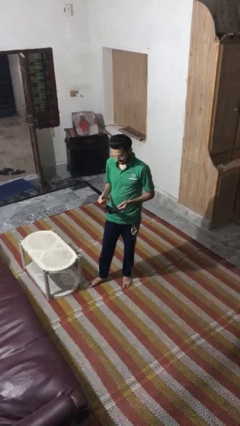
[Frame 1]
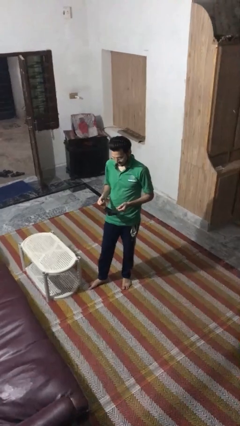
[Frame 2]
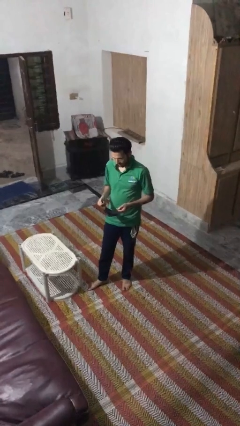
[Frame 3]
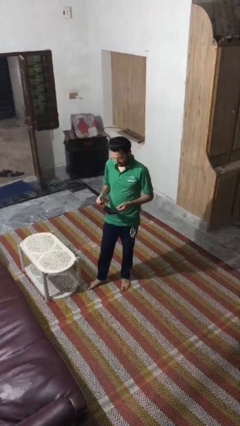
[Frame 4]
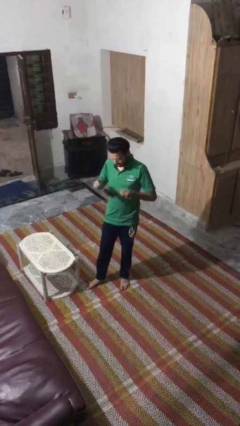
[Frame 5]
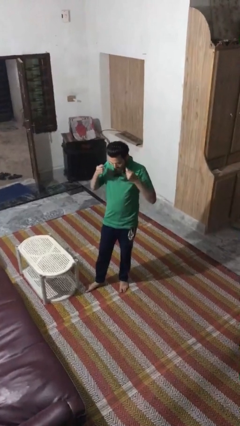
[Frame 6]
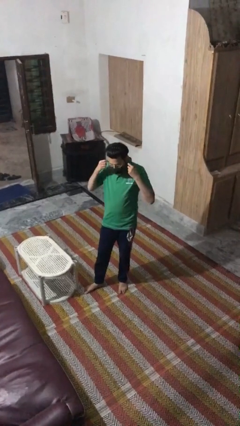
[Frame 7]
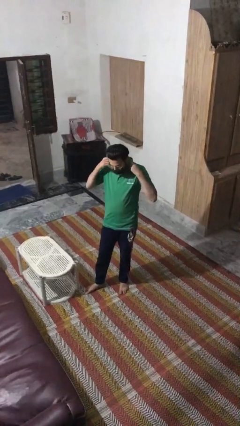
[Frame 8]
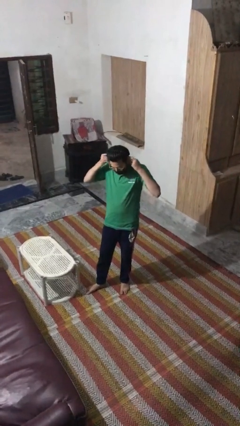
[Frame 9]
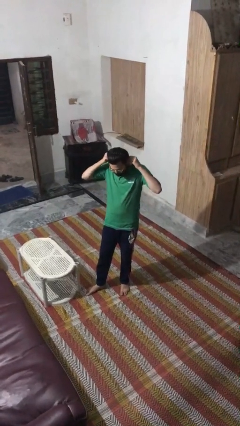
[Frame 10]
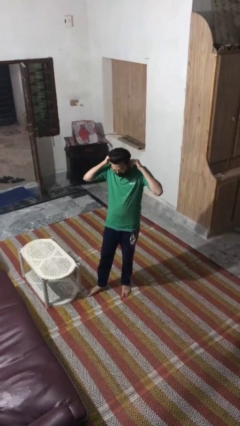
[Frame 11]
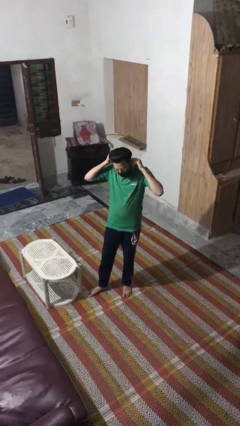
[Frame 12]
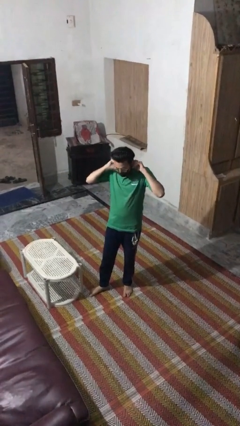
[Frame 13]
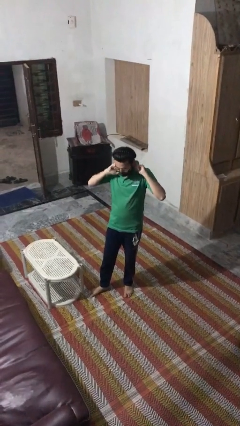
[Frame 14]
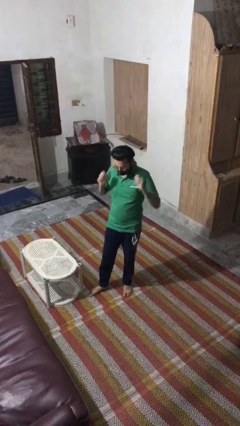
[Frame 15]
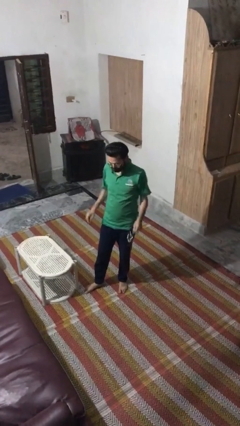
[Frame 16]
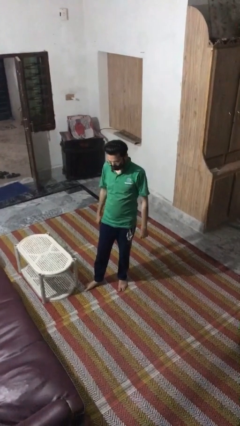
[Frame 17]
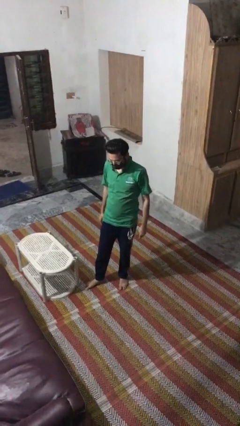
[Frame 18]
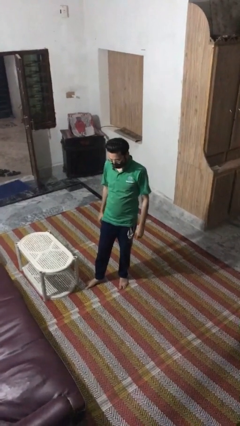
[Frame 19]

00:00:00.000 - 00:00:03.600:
person puts on facemask

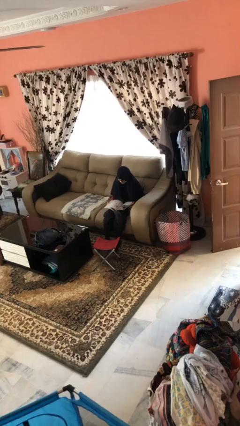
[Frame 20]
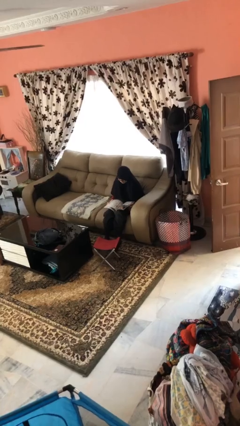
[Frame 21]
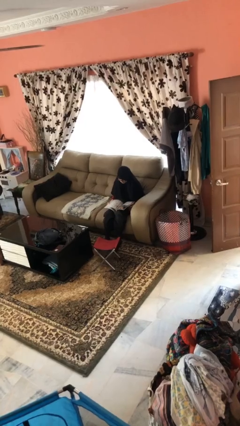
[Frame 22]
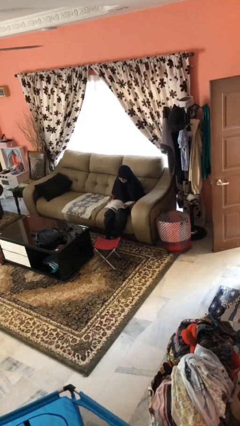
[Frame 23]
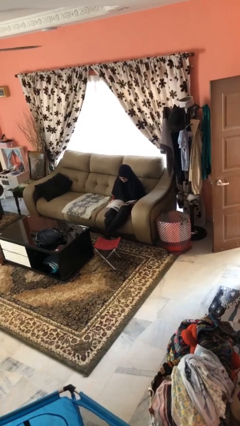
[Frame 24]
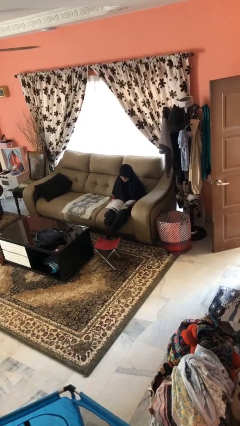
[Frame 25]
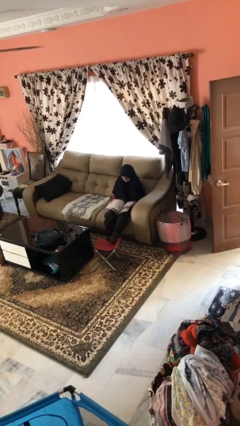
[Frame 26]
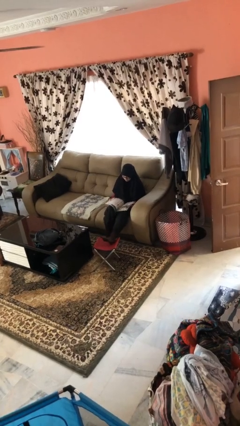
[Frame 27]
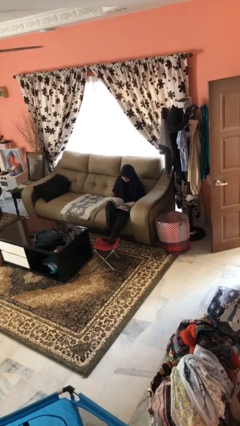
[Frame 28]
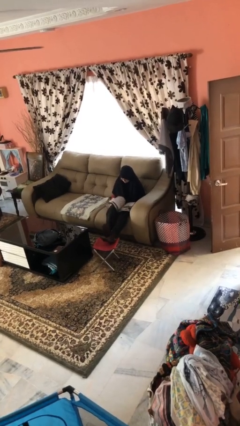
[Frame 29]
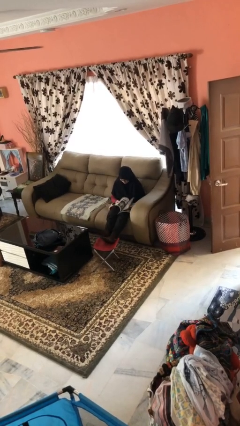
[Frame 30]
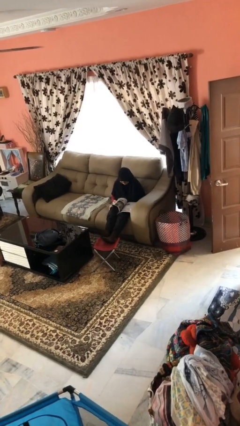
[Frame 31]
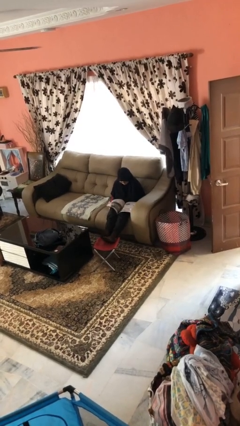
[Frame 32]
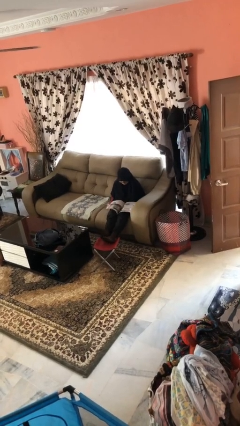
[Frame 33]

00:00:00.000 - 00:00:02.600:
person puts feet up

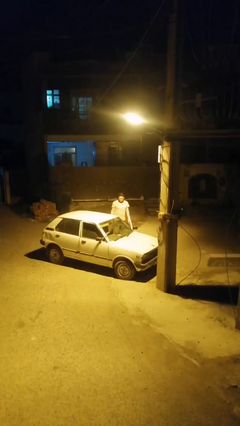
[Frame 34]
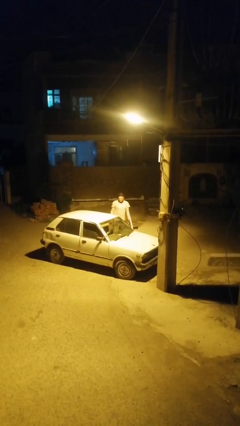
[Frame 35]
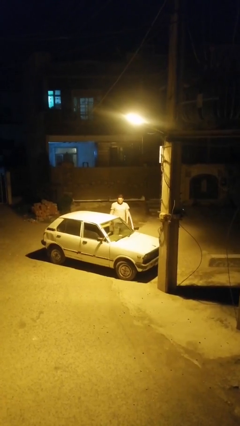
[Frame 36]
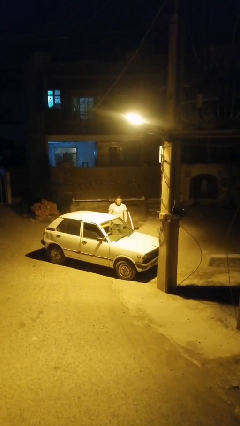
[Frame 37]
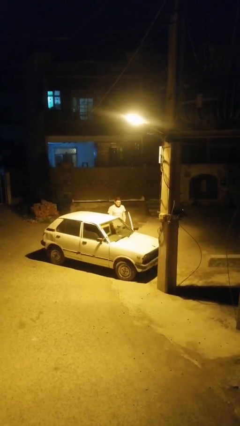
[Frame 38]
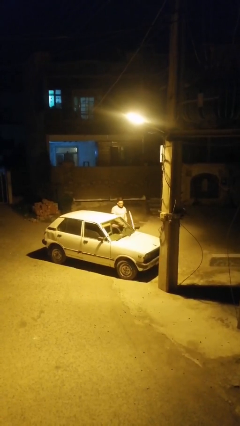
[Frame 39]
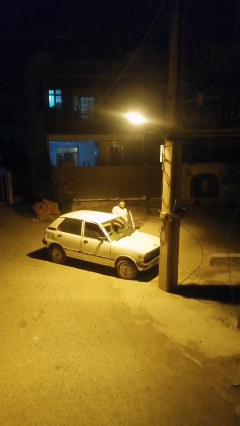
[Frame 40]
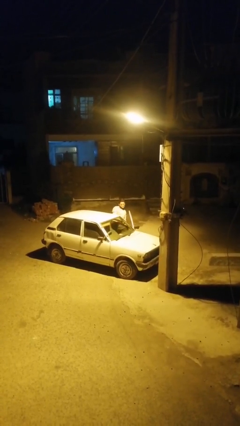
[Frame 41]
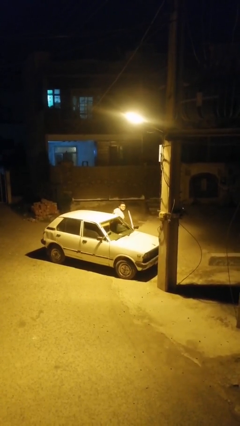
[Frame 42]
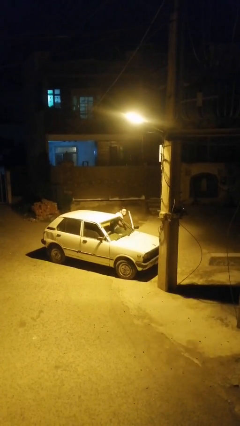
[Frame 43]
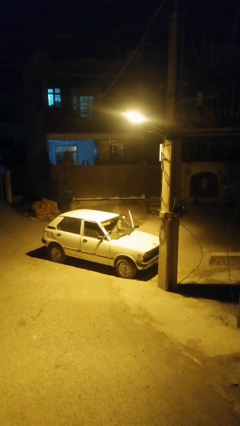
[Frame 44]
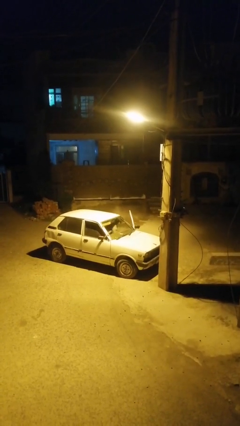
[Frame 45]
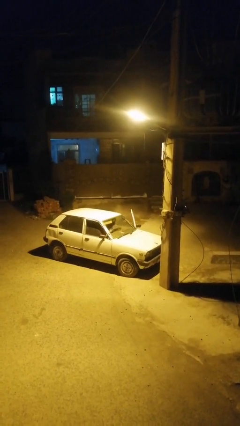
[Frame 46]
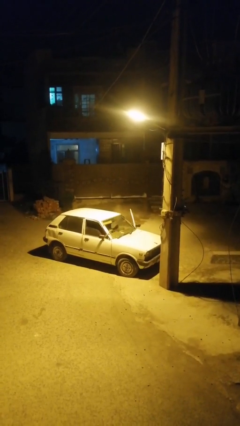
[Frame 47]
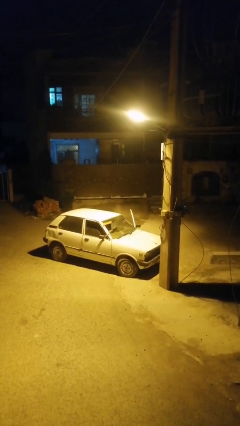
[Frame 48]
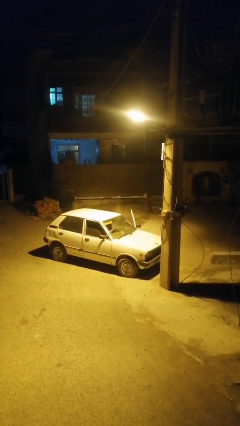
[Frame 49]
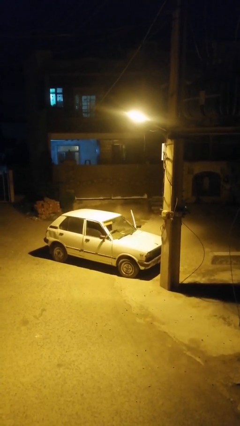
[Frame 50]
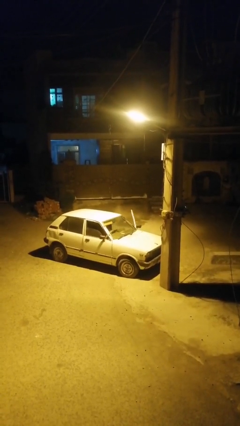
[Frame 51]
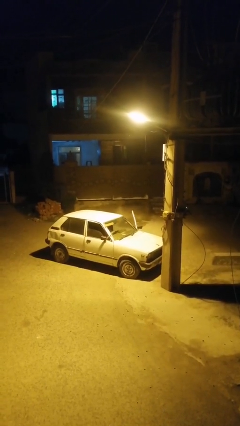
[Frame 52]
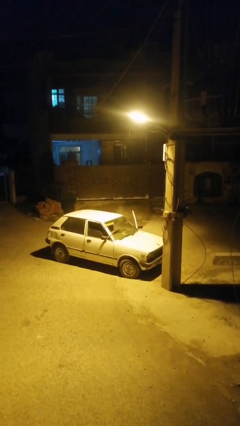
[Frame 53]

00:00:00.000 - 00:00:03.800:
person enters car

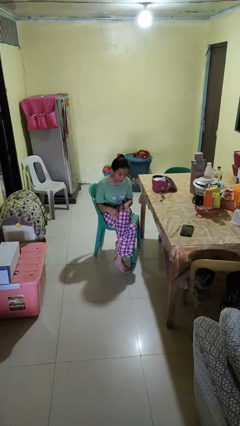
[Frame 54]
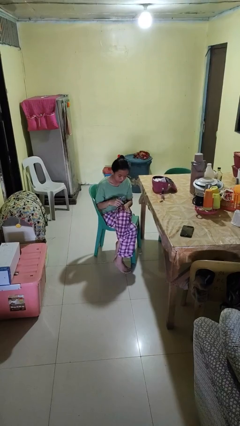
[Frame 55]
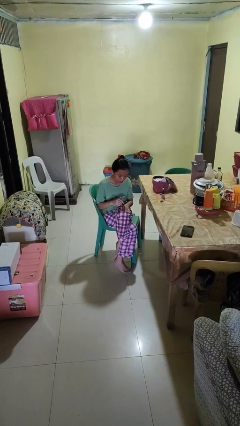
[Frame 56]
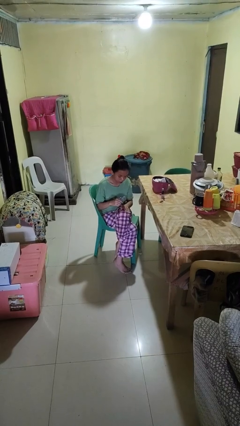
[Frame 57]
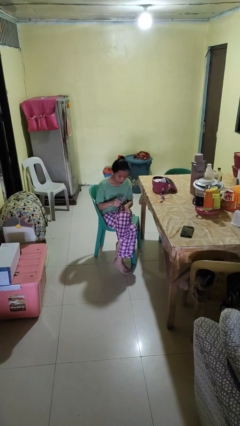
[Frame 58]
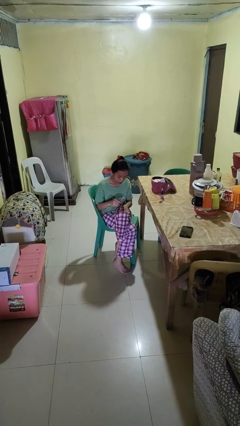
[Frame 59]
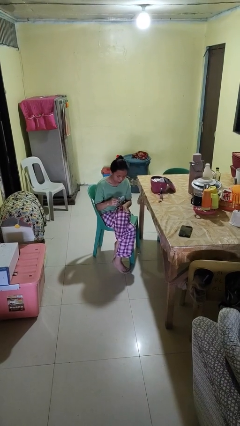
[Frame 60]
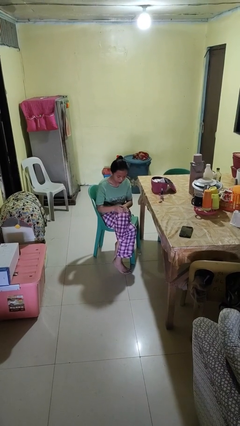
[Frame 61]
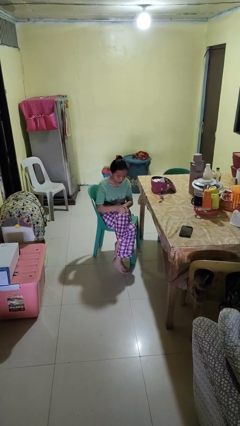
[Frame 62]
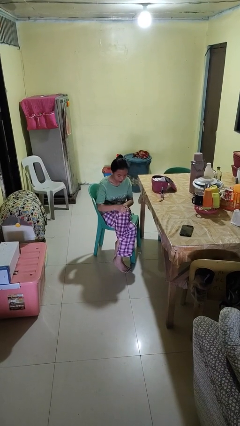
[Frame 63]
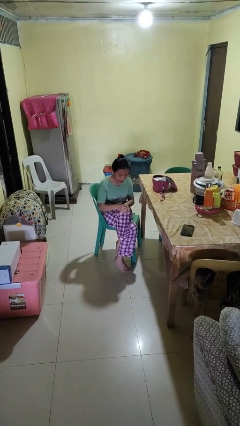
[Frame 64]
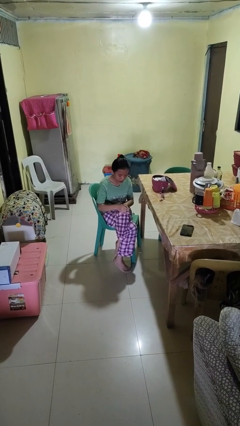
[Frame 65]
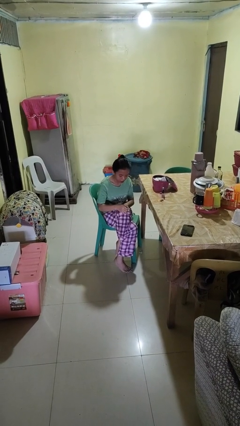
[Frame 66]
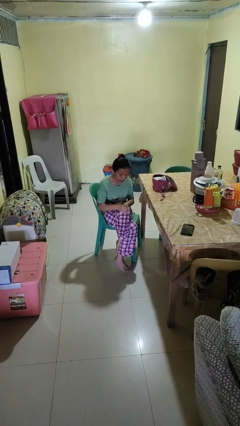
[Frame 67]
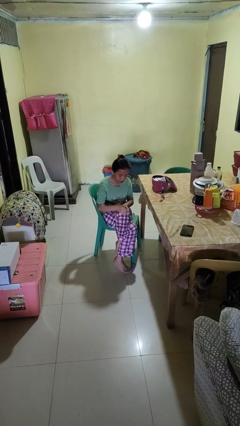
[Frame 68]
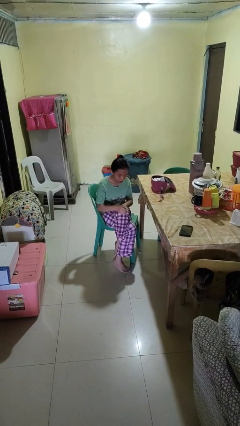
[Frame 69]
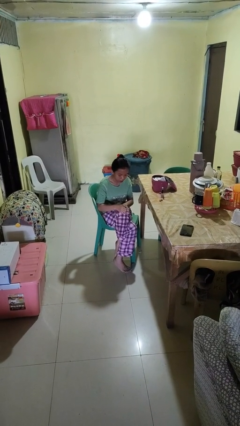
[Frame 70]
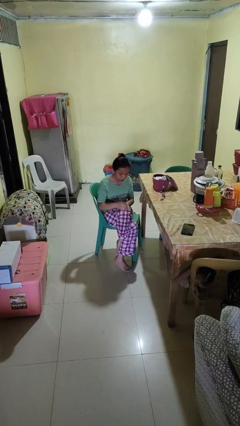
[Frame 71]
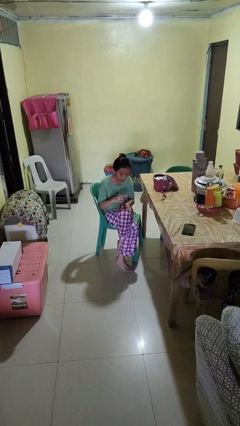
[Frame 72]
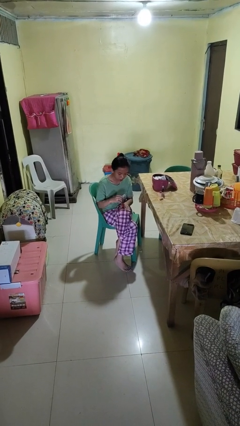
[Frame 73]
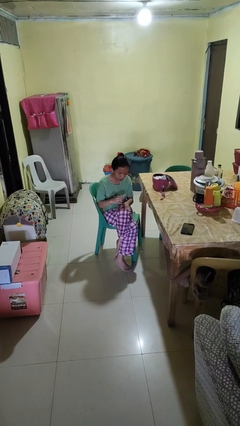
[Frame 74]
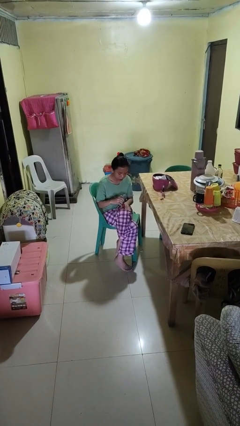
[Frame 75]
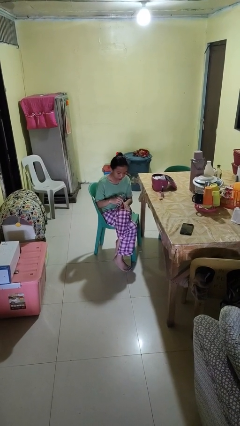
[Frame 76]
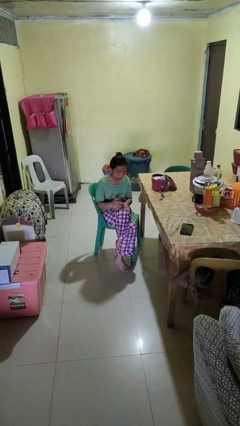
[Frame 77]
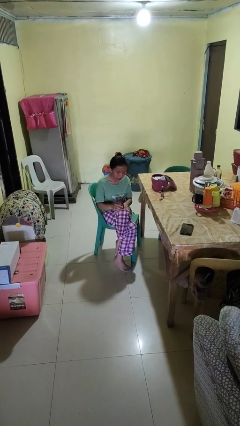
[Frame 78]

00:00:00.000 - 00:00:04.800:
person paints fingernails

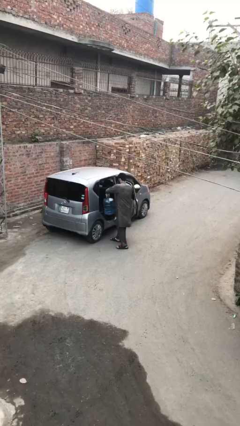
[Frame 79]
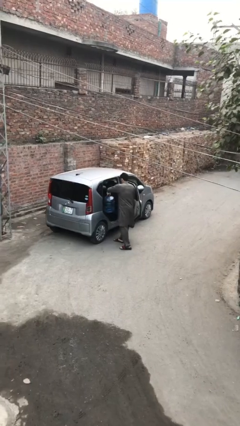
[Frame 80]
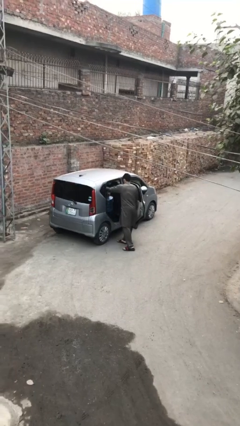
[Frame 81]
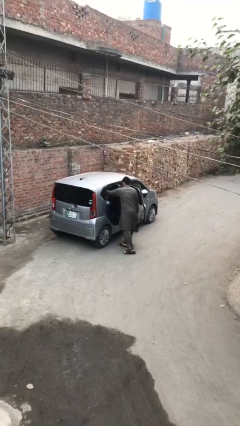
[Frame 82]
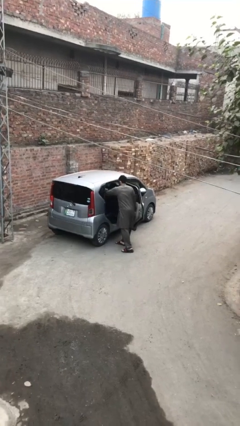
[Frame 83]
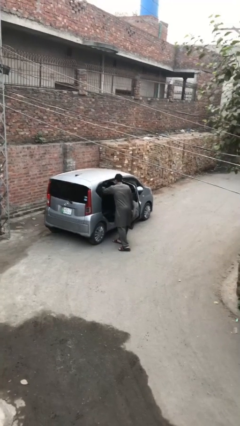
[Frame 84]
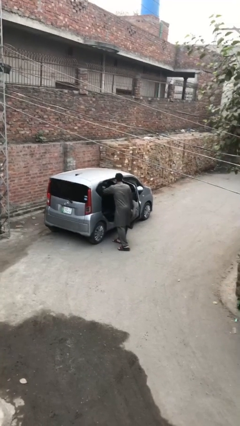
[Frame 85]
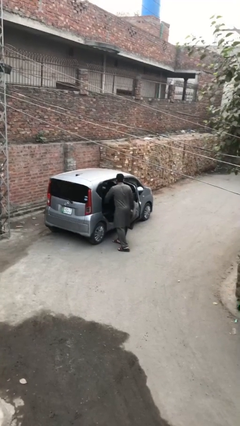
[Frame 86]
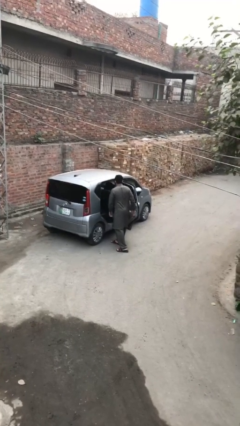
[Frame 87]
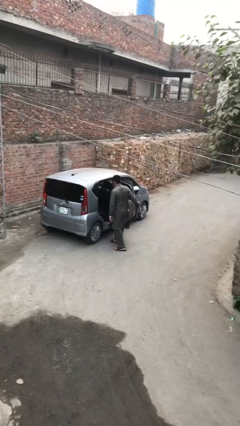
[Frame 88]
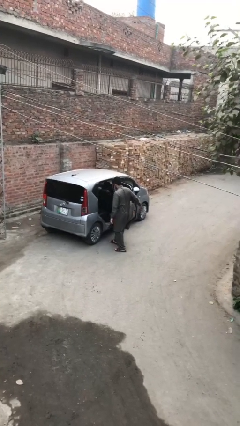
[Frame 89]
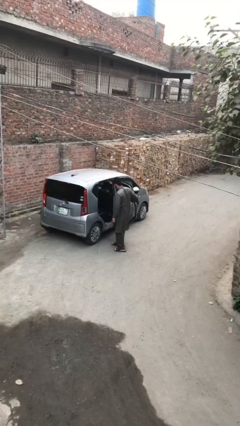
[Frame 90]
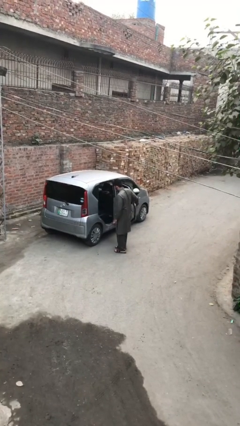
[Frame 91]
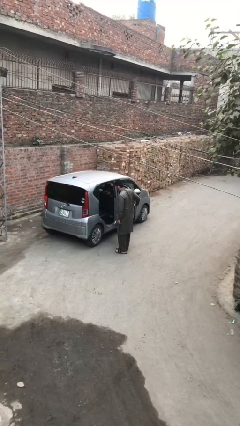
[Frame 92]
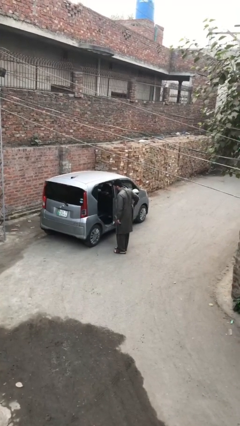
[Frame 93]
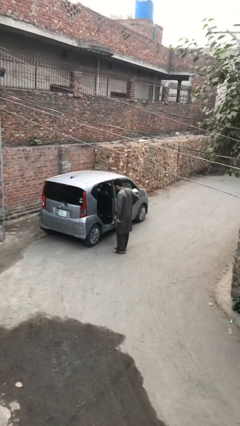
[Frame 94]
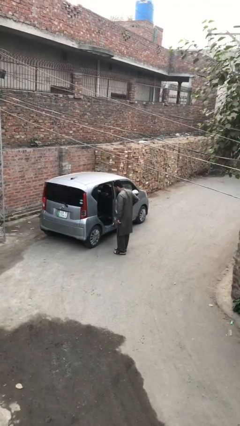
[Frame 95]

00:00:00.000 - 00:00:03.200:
person loads car
